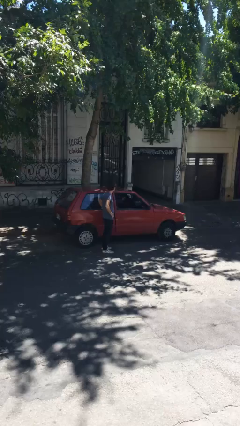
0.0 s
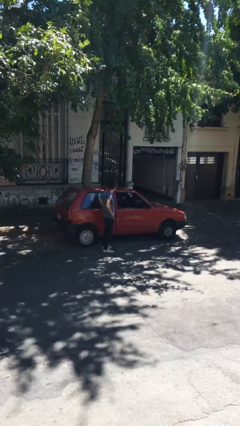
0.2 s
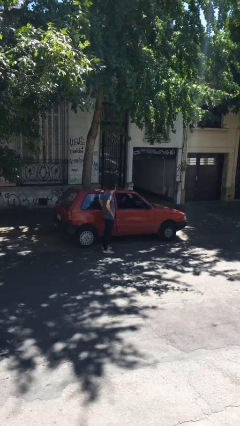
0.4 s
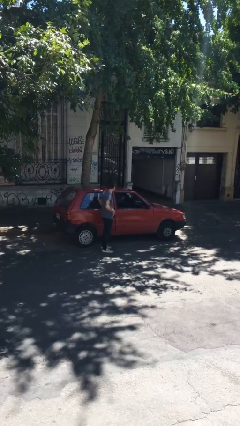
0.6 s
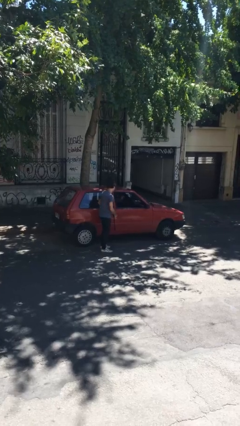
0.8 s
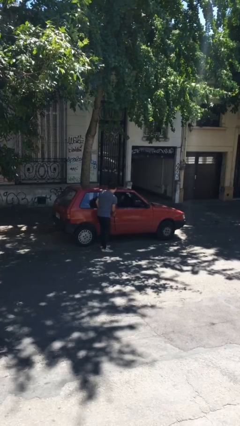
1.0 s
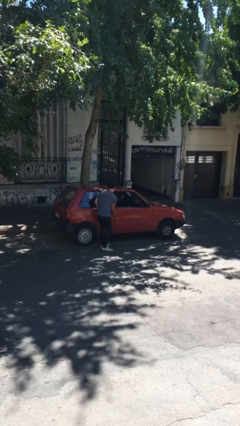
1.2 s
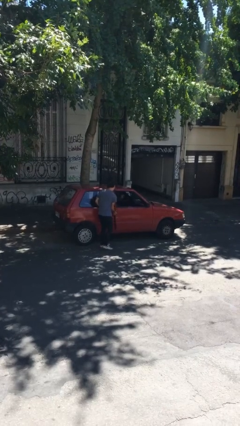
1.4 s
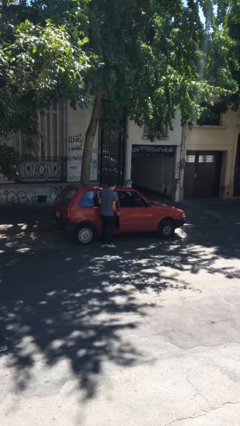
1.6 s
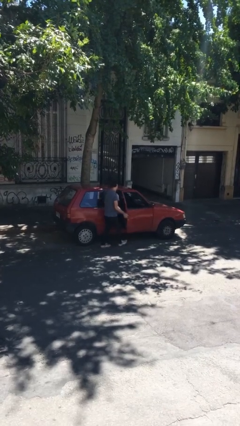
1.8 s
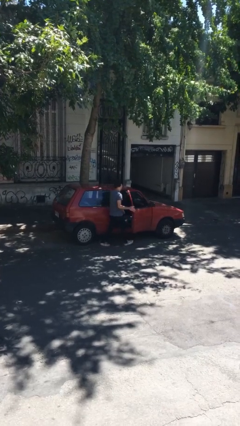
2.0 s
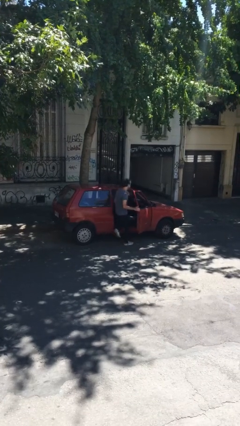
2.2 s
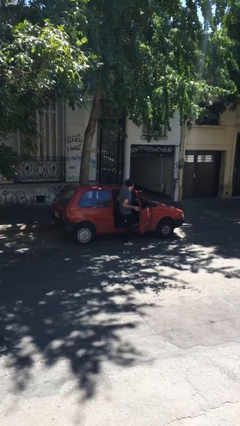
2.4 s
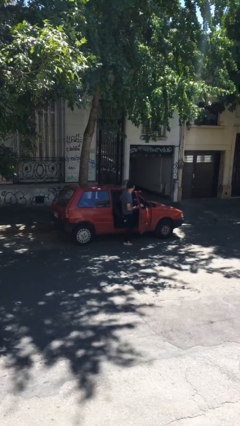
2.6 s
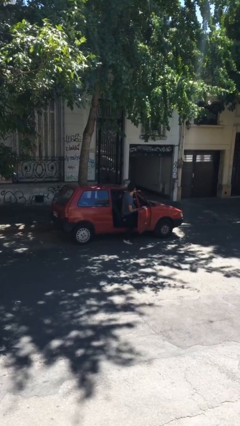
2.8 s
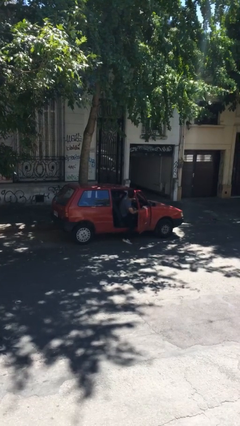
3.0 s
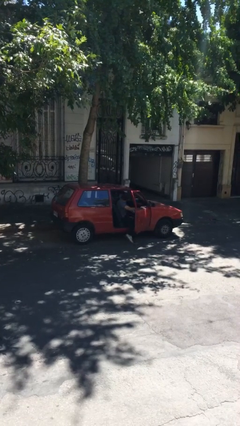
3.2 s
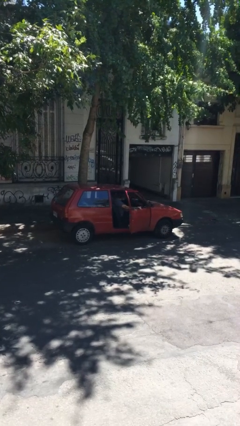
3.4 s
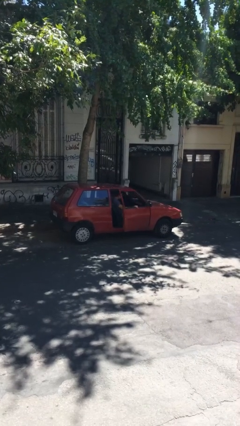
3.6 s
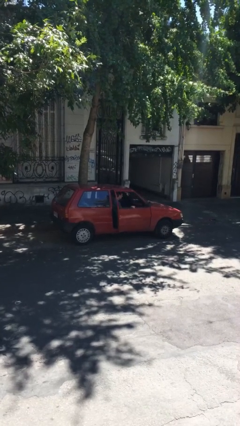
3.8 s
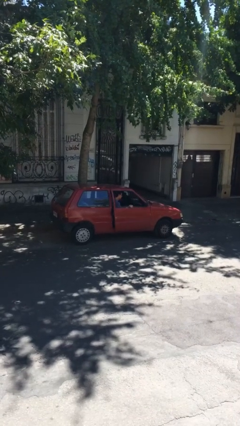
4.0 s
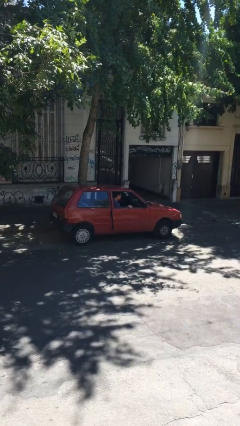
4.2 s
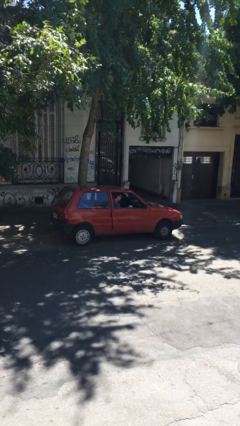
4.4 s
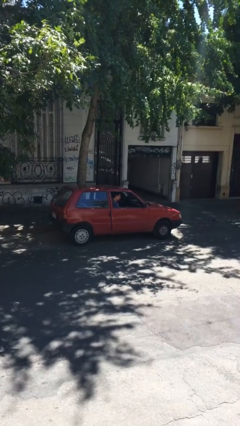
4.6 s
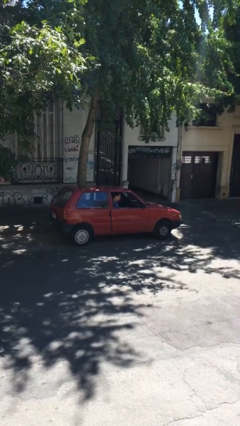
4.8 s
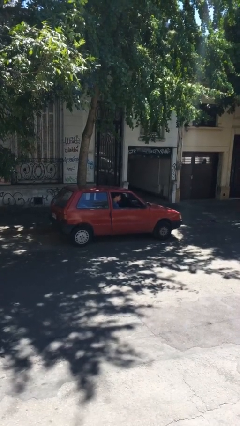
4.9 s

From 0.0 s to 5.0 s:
car picks up person

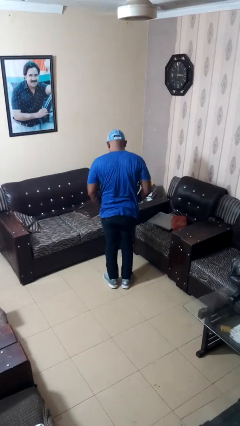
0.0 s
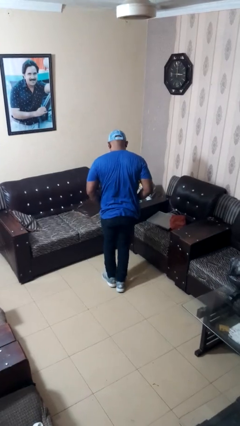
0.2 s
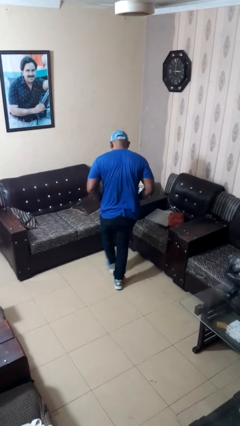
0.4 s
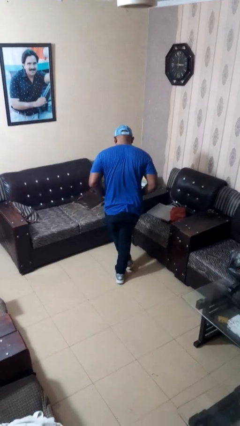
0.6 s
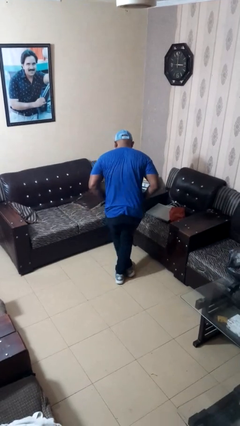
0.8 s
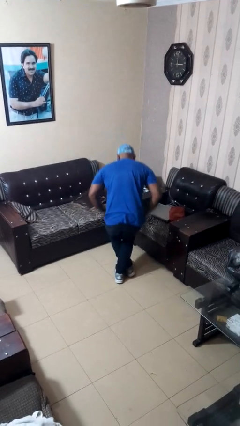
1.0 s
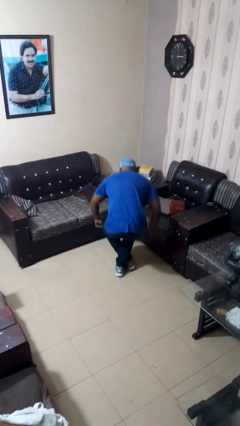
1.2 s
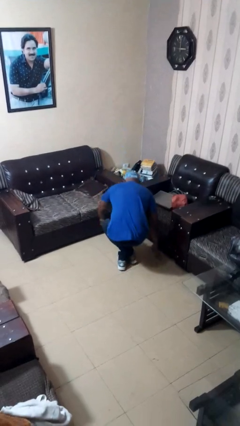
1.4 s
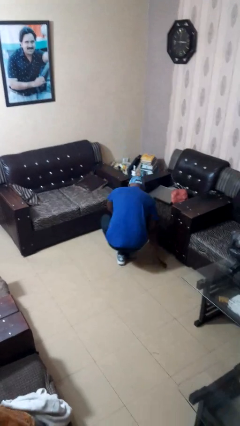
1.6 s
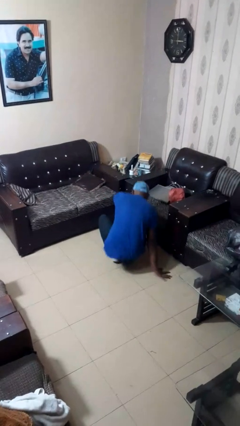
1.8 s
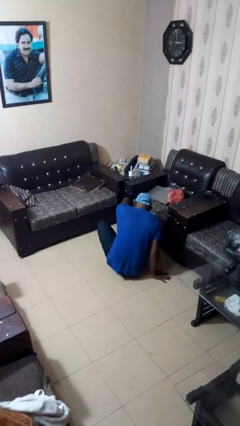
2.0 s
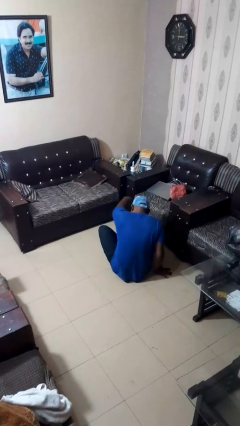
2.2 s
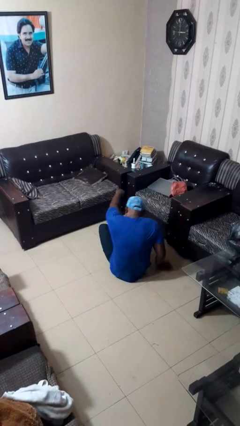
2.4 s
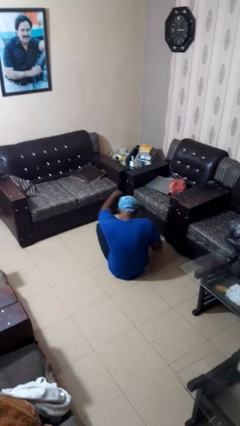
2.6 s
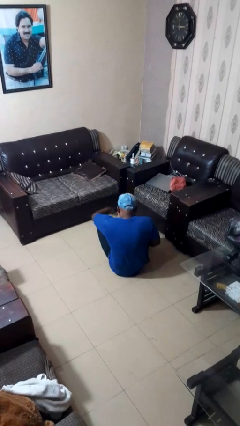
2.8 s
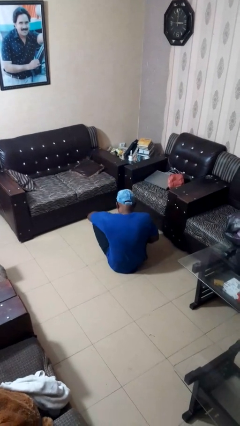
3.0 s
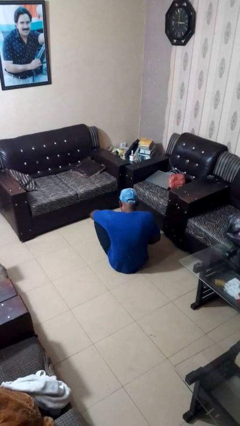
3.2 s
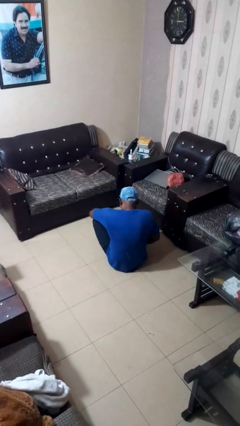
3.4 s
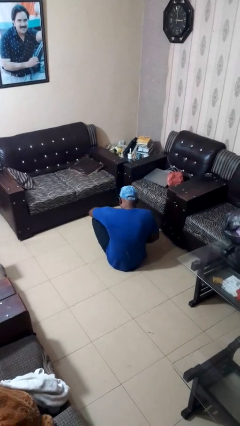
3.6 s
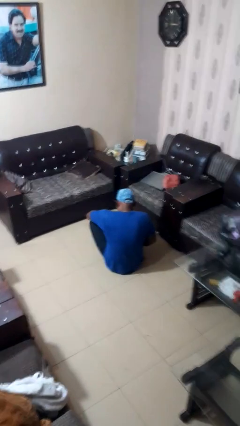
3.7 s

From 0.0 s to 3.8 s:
person sits crisscross

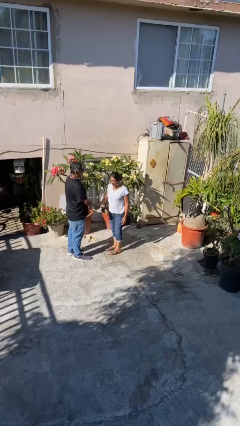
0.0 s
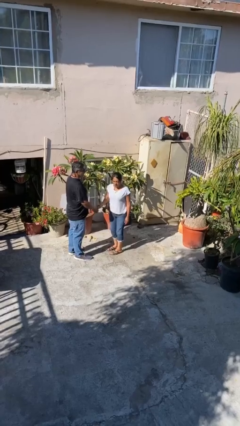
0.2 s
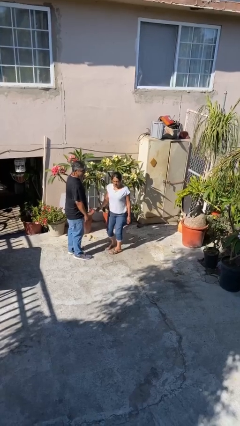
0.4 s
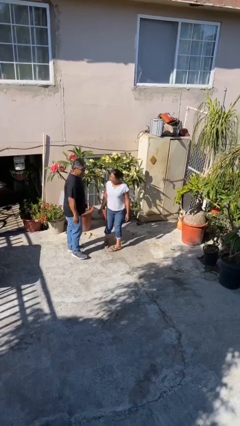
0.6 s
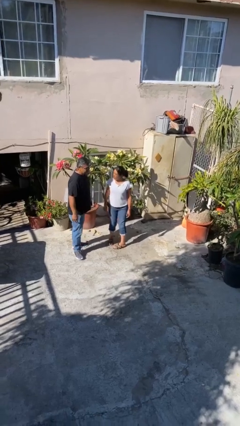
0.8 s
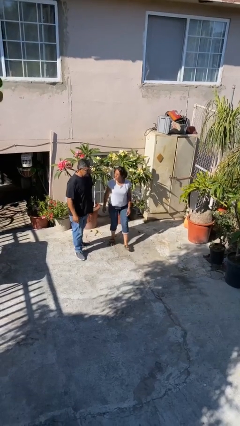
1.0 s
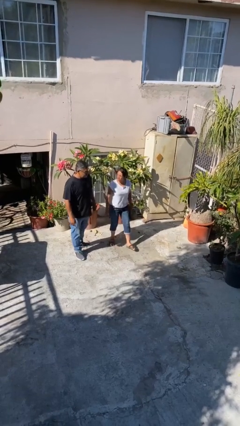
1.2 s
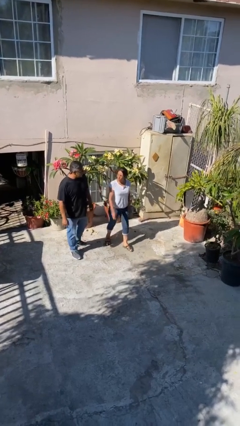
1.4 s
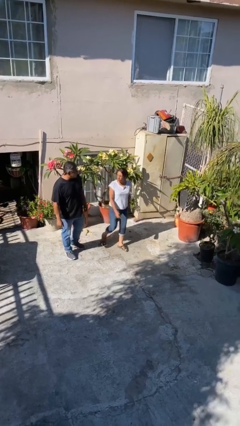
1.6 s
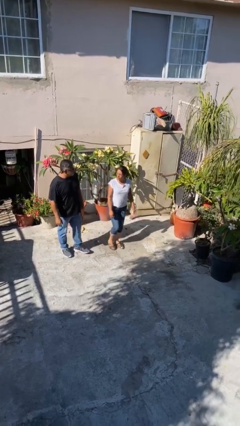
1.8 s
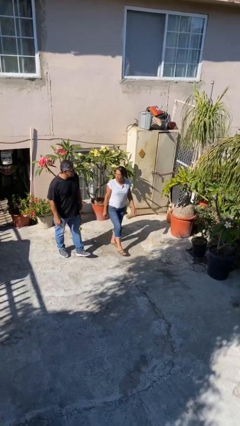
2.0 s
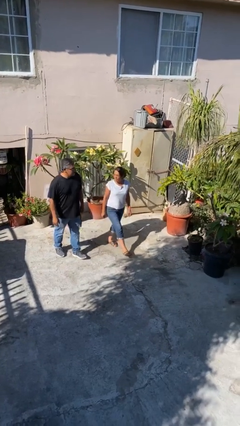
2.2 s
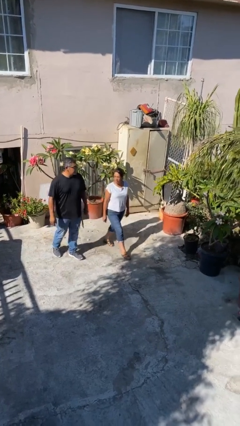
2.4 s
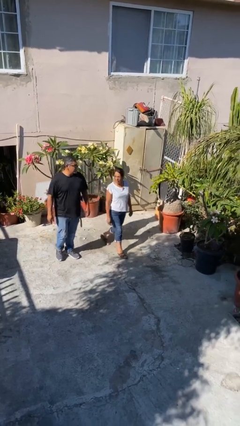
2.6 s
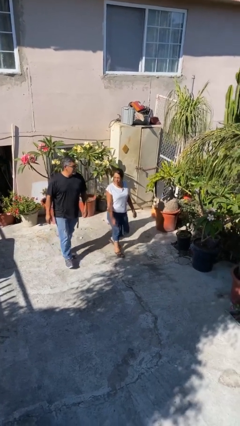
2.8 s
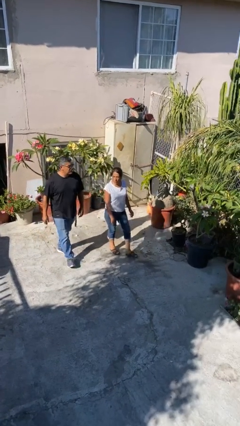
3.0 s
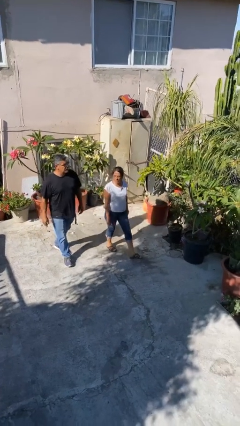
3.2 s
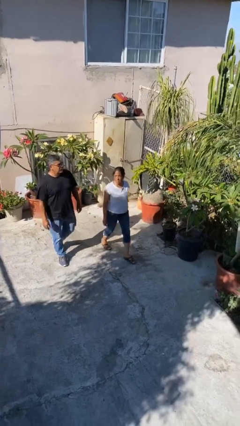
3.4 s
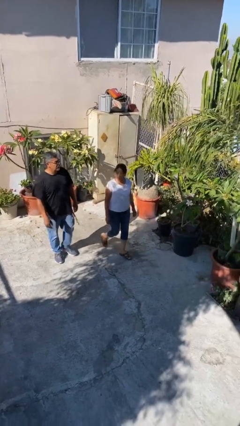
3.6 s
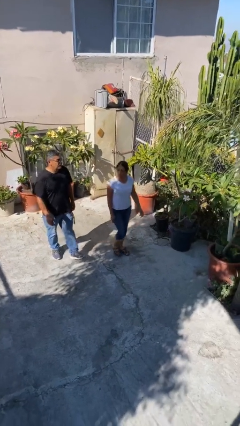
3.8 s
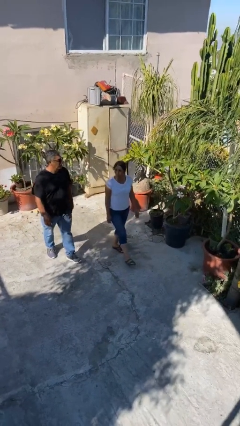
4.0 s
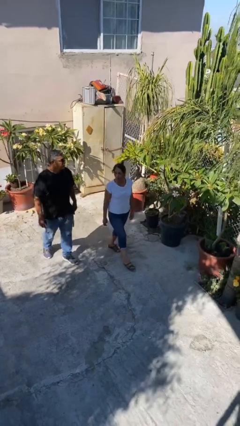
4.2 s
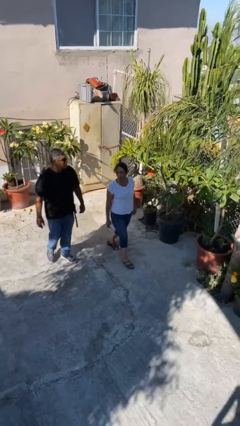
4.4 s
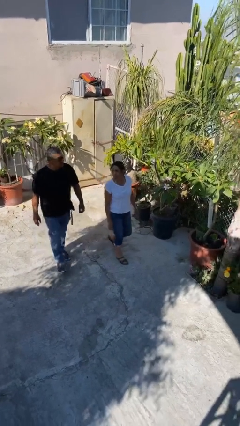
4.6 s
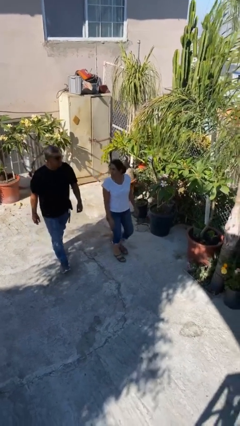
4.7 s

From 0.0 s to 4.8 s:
person talks to person

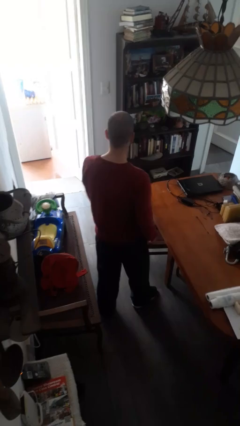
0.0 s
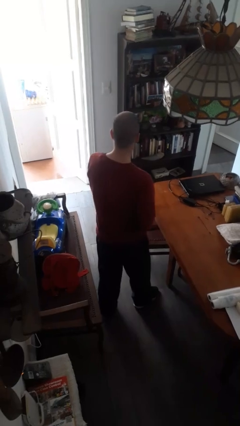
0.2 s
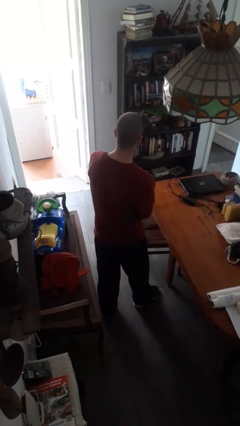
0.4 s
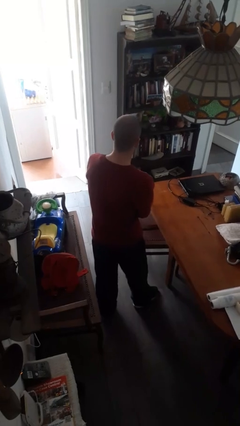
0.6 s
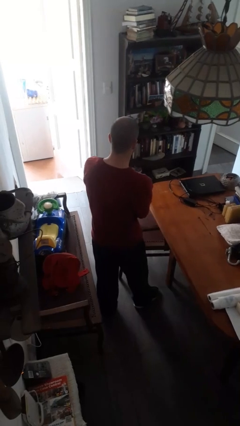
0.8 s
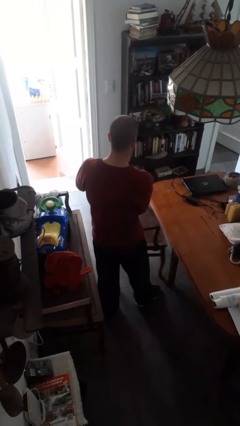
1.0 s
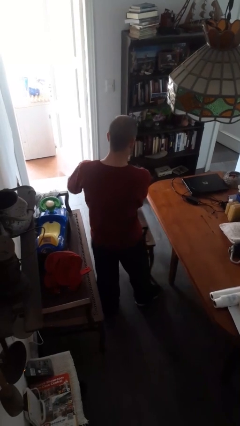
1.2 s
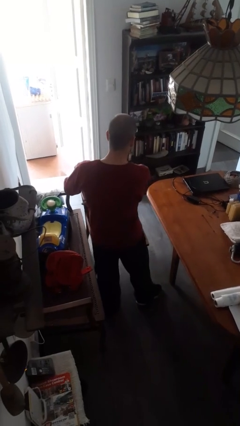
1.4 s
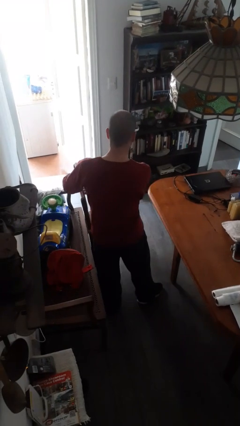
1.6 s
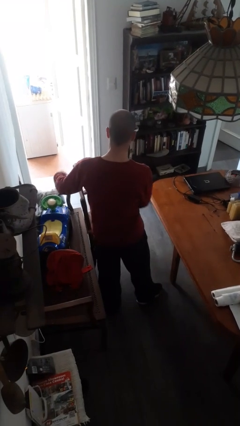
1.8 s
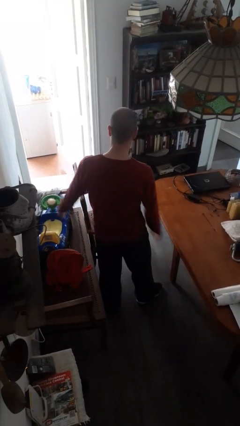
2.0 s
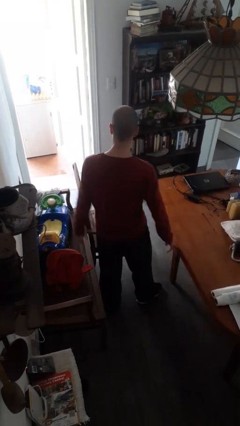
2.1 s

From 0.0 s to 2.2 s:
person pulls out chair

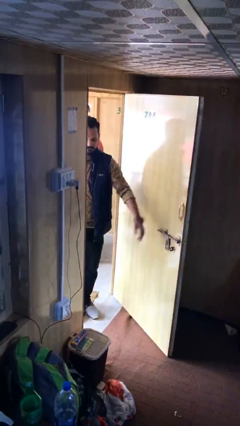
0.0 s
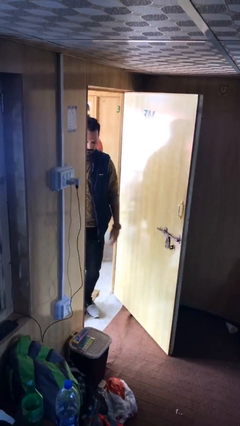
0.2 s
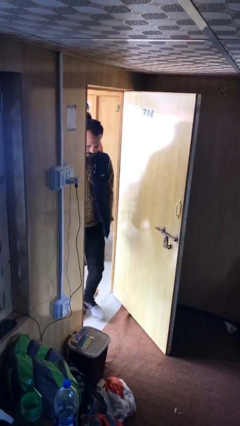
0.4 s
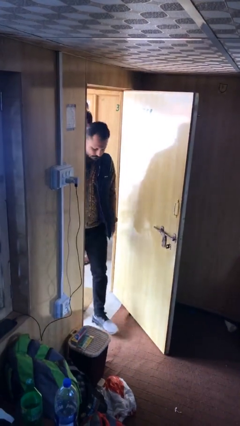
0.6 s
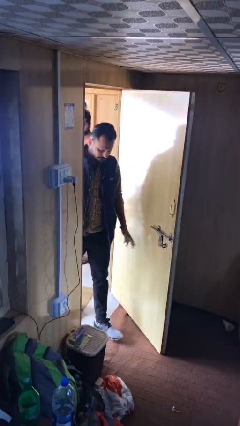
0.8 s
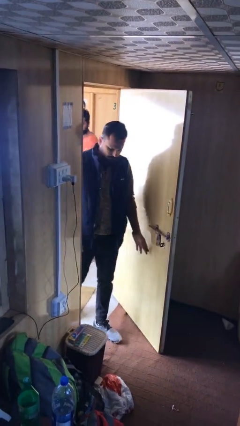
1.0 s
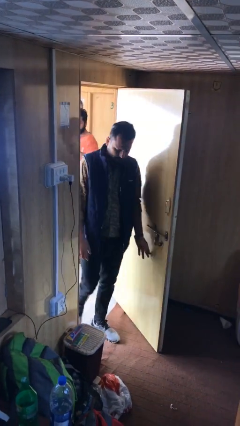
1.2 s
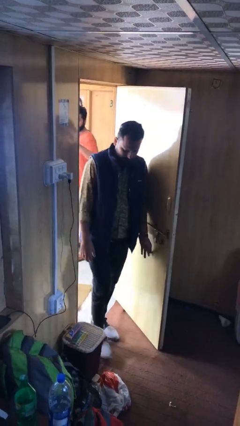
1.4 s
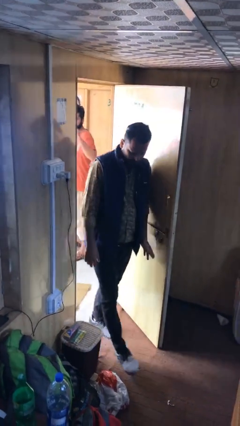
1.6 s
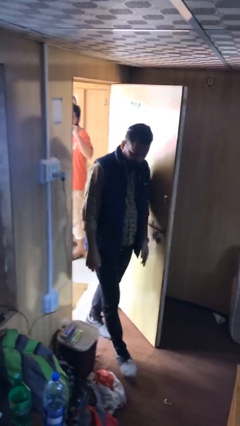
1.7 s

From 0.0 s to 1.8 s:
person enters scene through structure

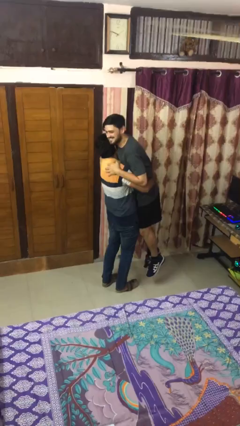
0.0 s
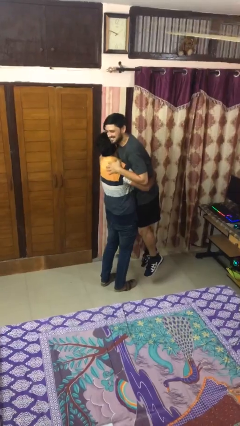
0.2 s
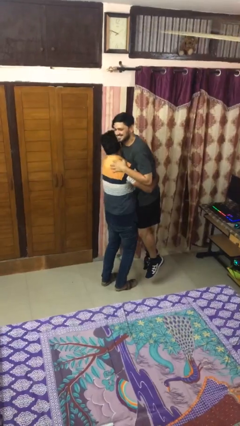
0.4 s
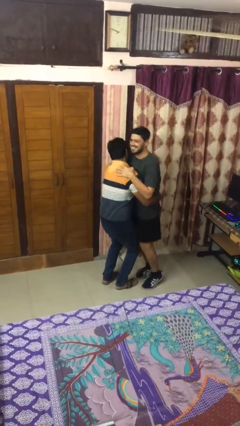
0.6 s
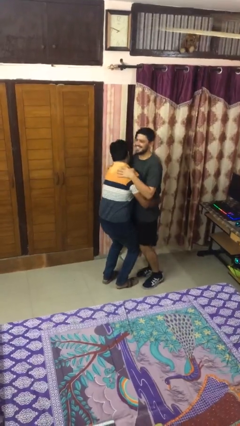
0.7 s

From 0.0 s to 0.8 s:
person puts down person
